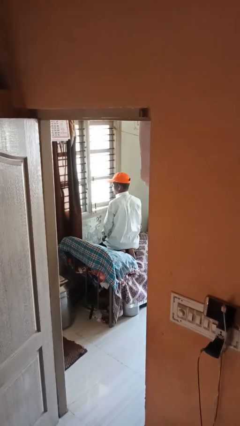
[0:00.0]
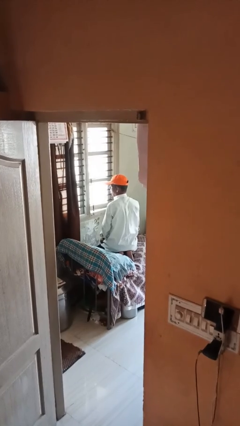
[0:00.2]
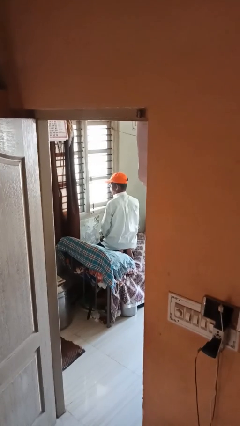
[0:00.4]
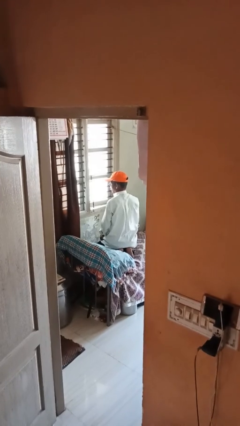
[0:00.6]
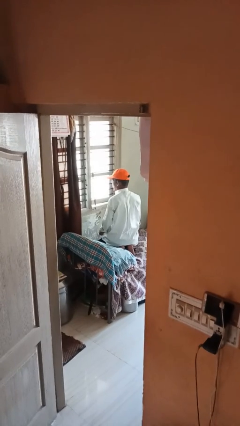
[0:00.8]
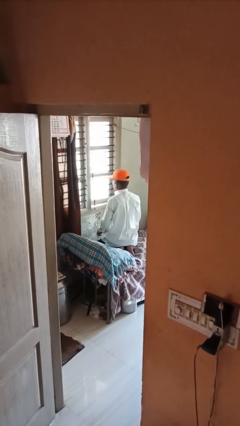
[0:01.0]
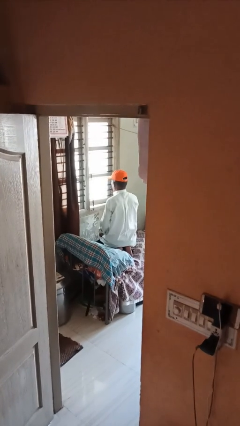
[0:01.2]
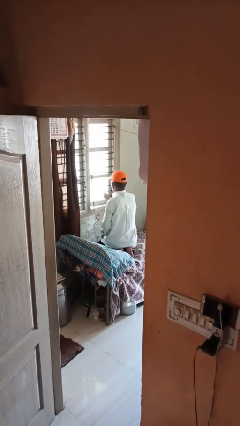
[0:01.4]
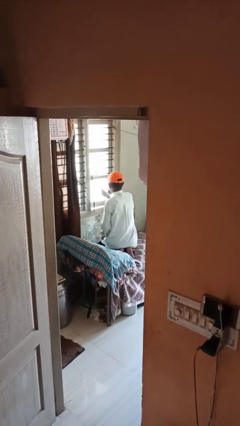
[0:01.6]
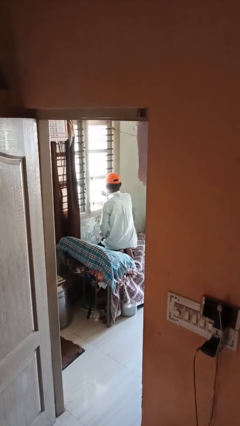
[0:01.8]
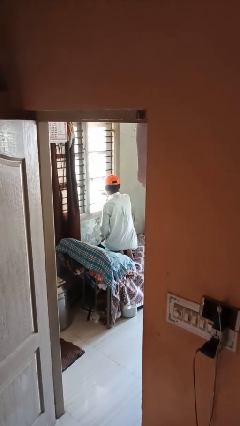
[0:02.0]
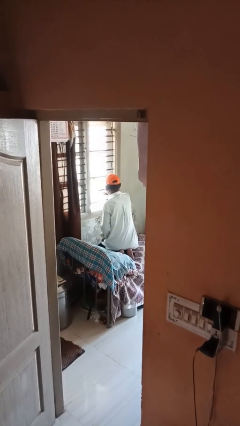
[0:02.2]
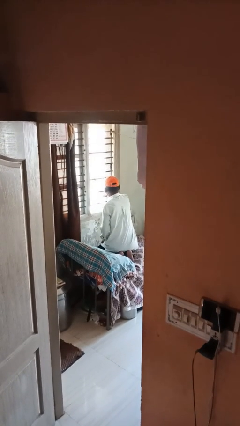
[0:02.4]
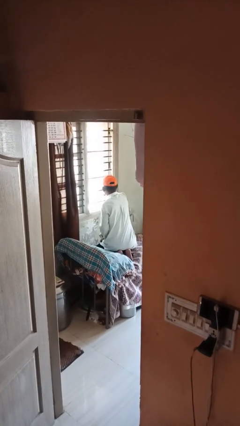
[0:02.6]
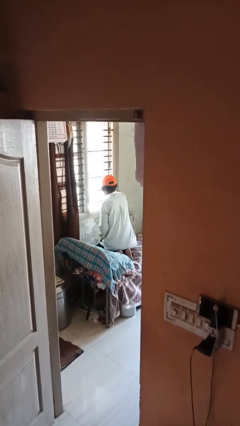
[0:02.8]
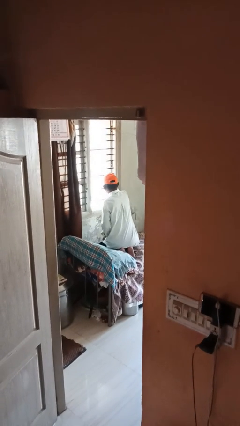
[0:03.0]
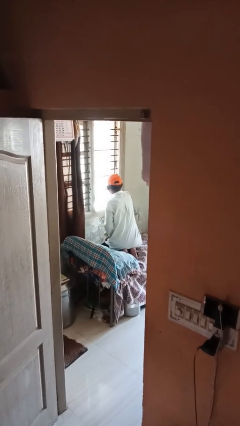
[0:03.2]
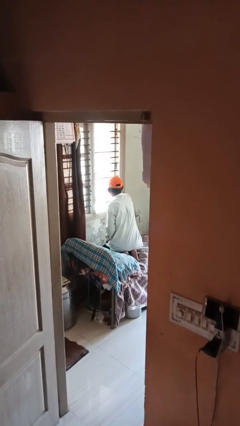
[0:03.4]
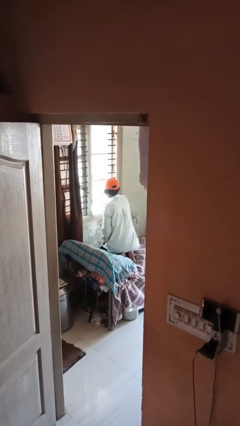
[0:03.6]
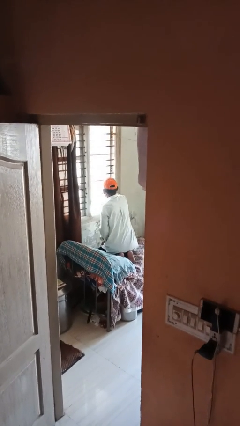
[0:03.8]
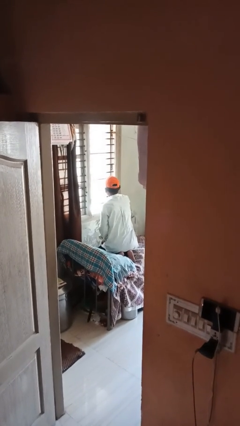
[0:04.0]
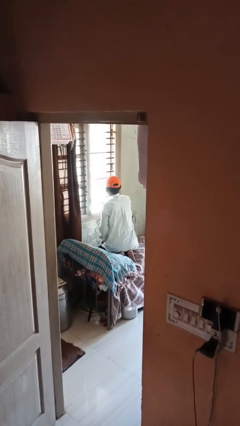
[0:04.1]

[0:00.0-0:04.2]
person opens home window

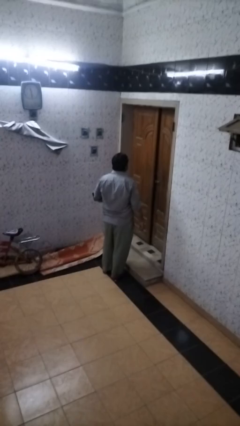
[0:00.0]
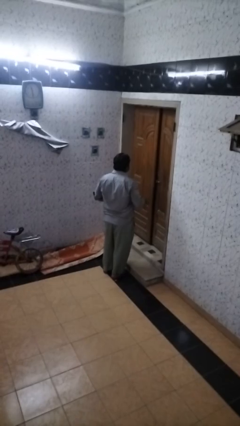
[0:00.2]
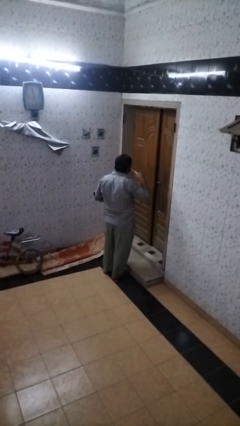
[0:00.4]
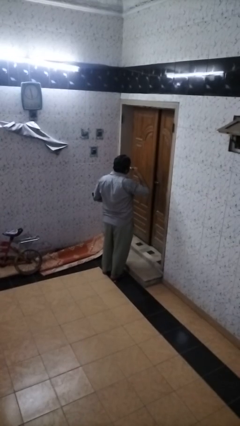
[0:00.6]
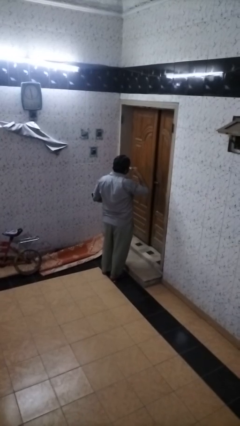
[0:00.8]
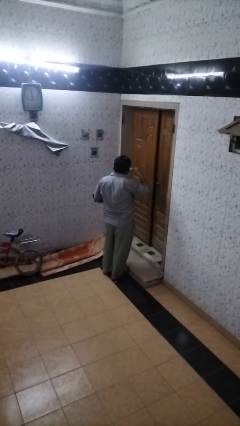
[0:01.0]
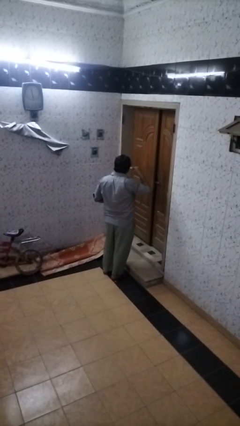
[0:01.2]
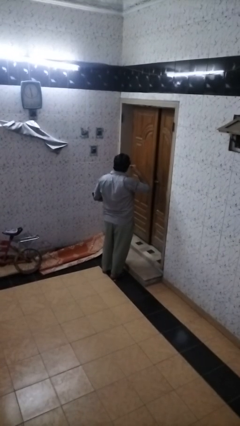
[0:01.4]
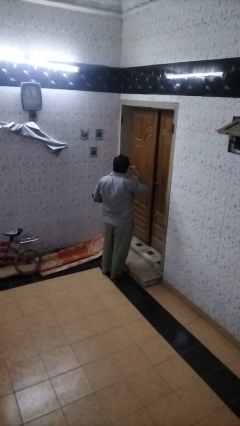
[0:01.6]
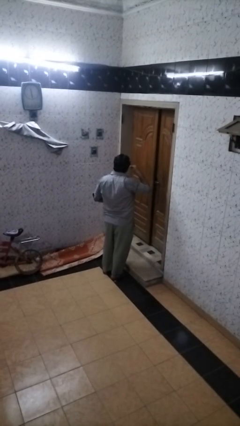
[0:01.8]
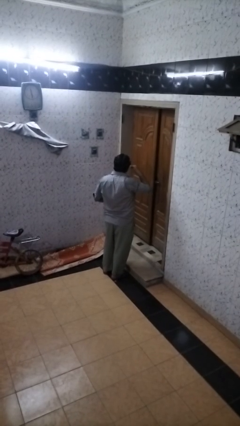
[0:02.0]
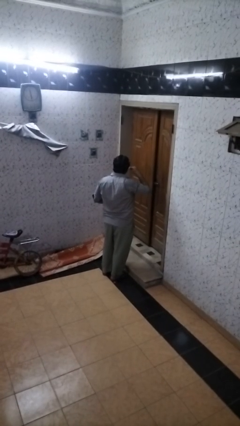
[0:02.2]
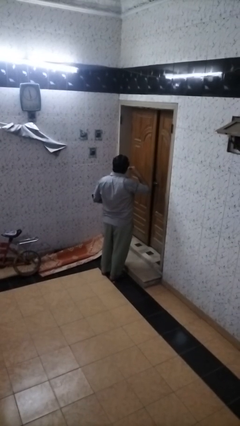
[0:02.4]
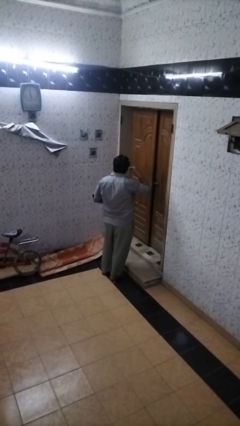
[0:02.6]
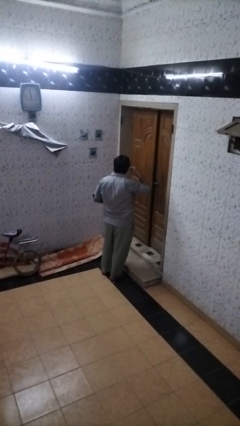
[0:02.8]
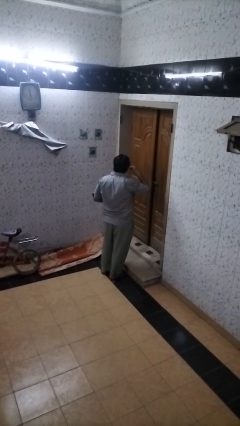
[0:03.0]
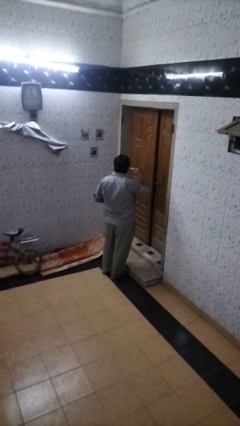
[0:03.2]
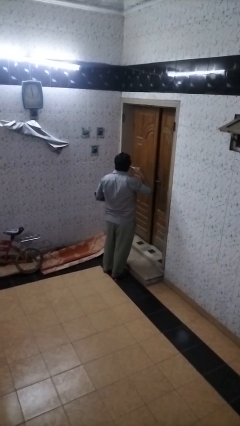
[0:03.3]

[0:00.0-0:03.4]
person brushes teeth

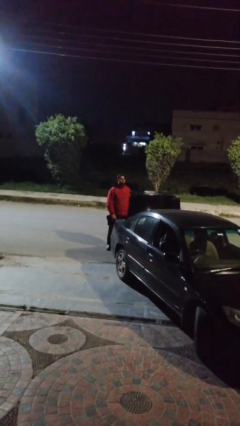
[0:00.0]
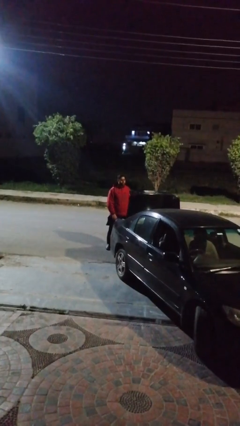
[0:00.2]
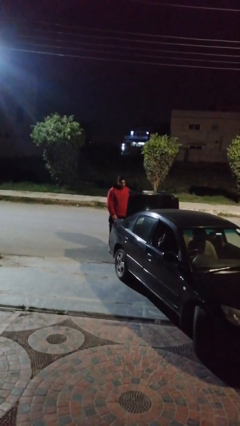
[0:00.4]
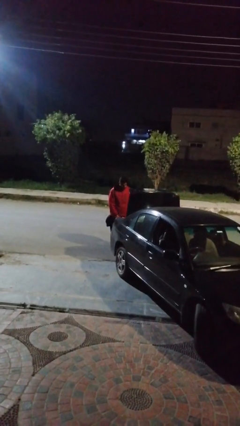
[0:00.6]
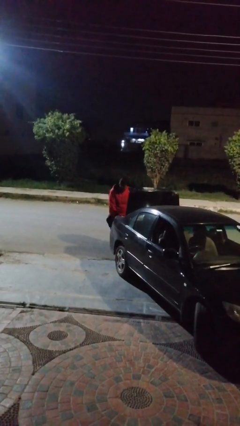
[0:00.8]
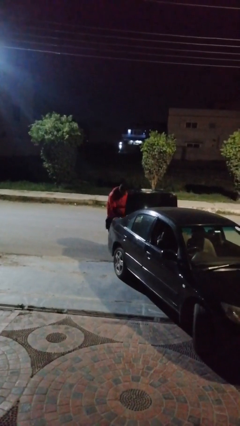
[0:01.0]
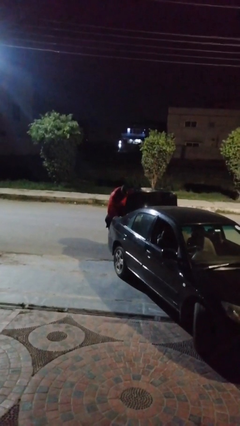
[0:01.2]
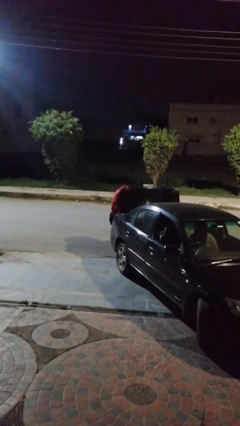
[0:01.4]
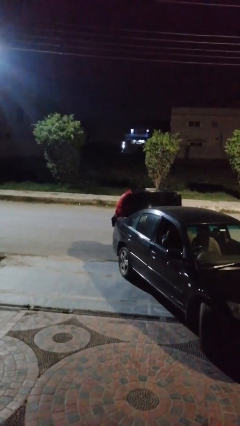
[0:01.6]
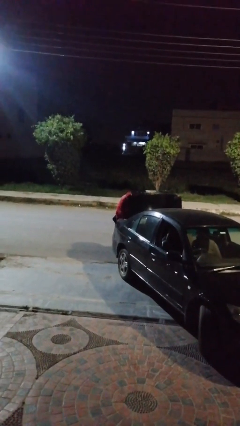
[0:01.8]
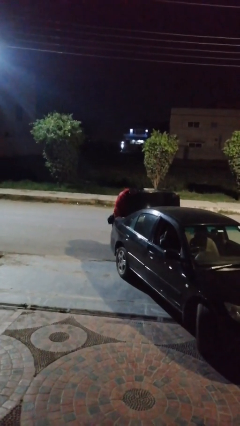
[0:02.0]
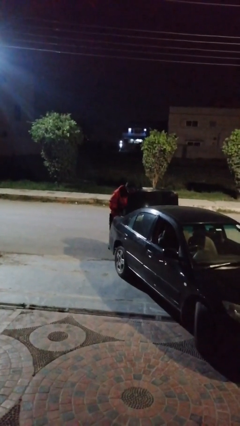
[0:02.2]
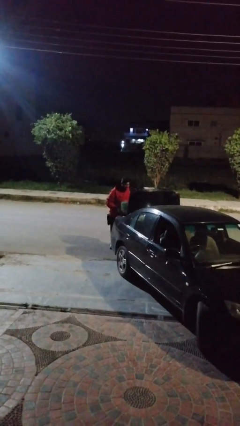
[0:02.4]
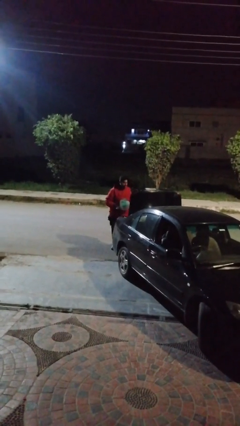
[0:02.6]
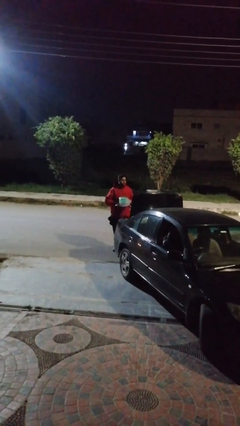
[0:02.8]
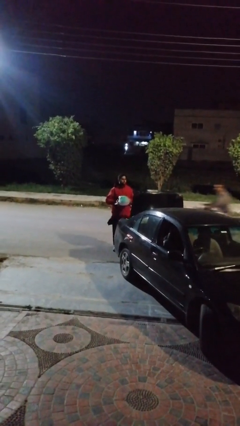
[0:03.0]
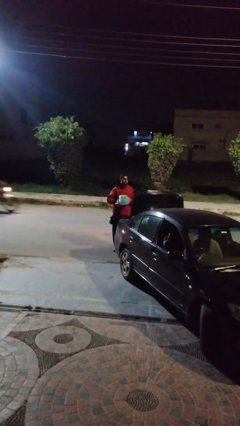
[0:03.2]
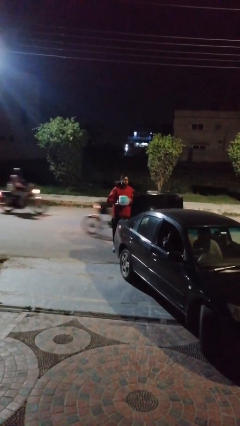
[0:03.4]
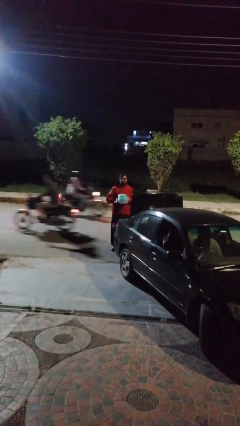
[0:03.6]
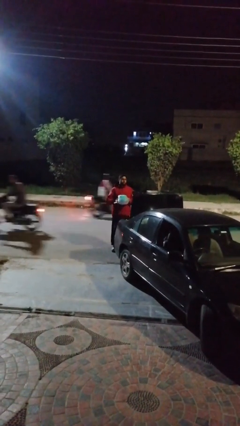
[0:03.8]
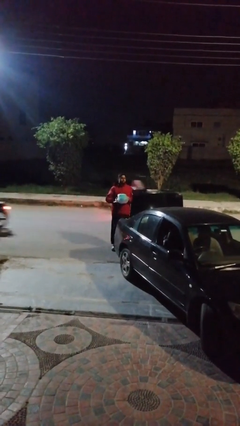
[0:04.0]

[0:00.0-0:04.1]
person unloads car

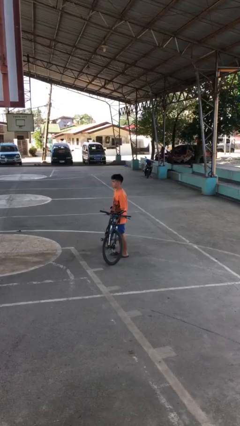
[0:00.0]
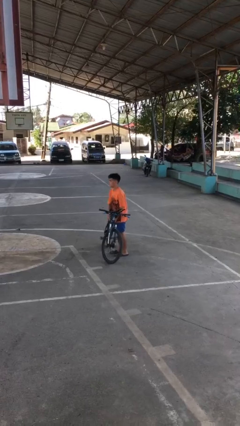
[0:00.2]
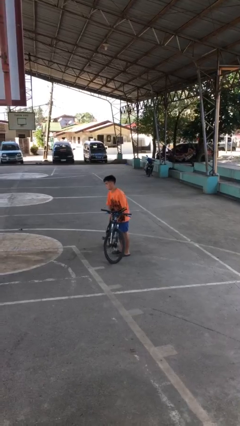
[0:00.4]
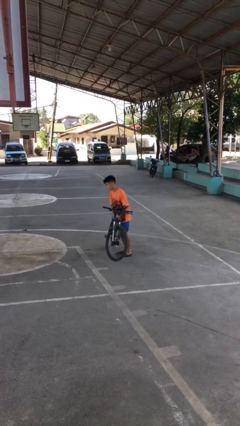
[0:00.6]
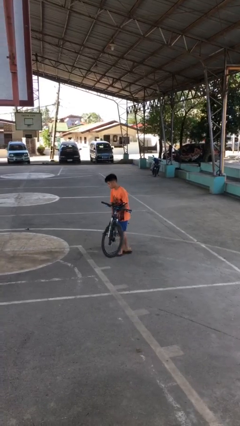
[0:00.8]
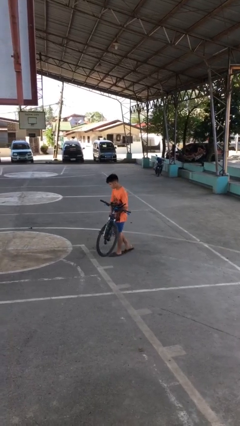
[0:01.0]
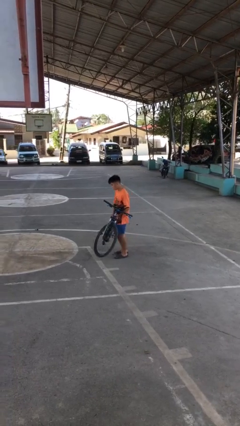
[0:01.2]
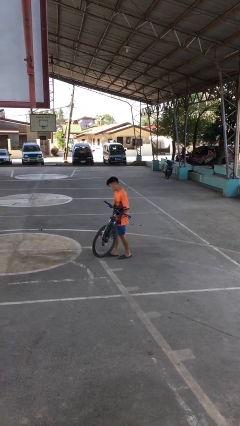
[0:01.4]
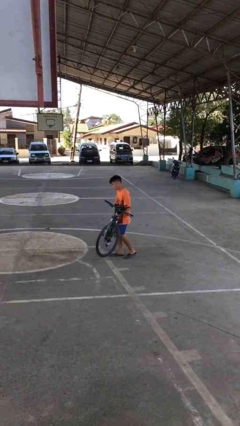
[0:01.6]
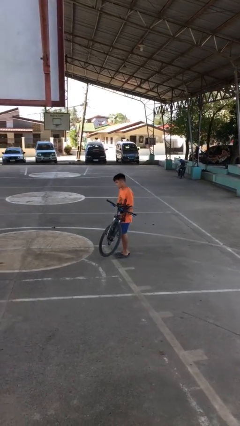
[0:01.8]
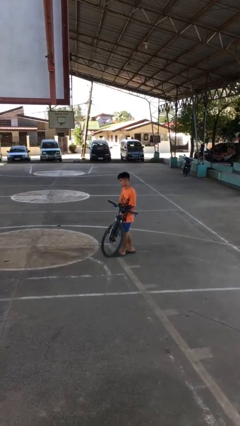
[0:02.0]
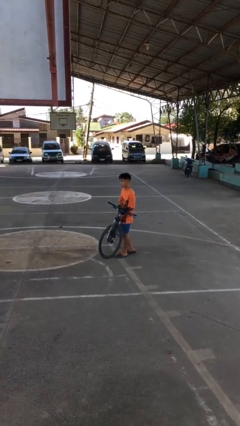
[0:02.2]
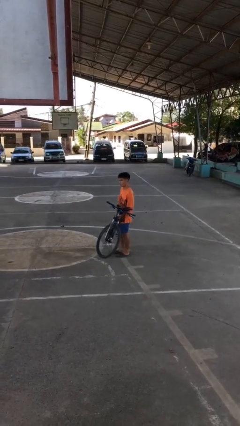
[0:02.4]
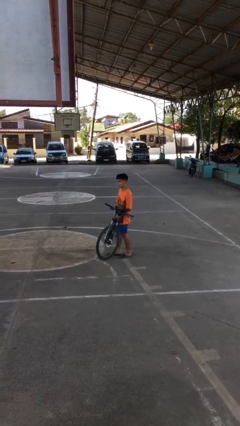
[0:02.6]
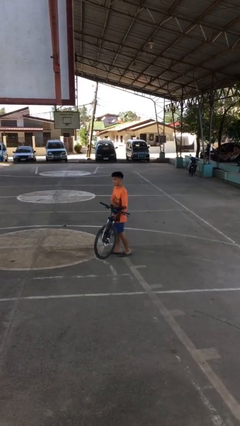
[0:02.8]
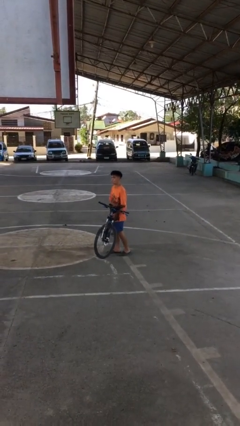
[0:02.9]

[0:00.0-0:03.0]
person carries bicycle

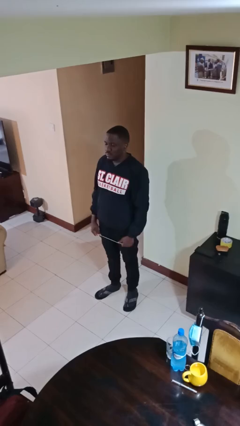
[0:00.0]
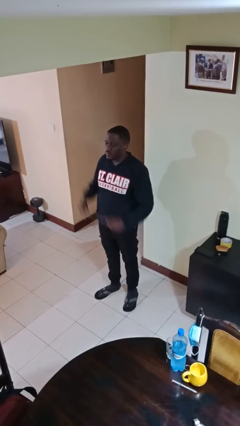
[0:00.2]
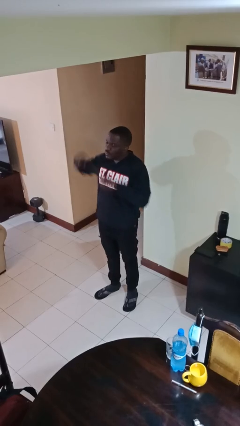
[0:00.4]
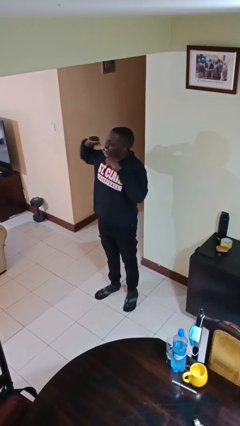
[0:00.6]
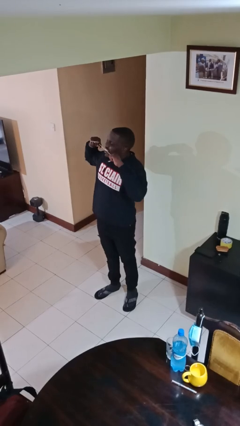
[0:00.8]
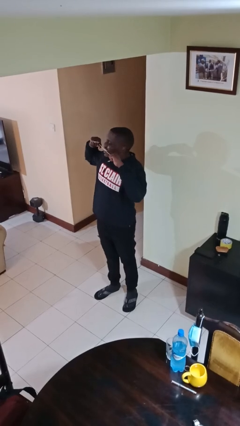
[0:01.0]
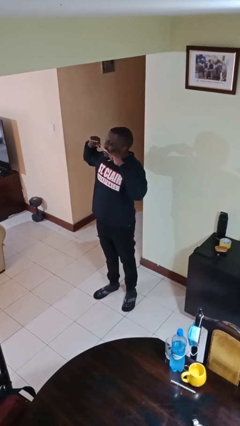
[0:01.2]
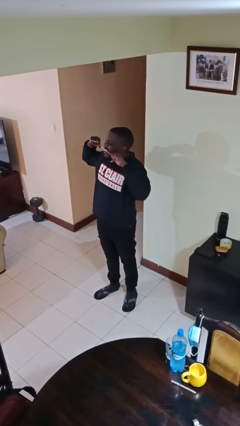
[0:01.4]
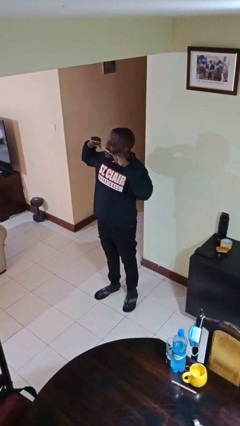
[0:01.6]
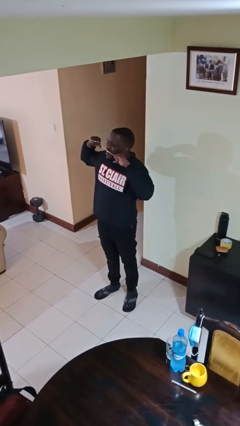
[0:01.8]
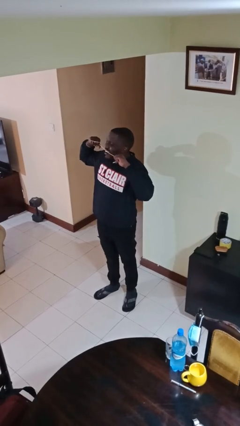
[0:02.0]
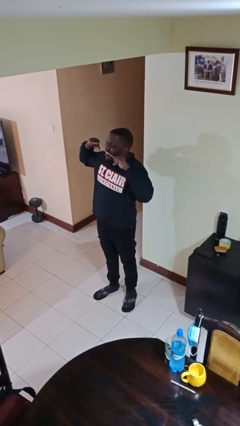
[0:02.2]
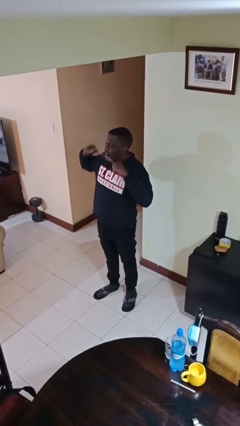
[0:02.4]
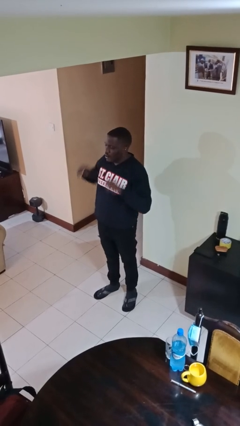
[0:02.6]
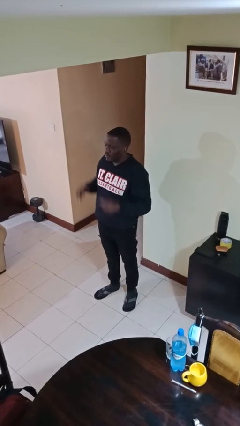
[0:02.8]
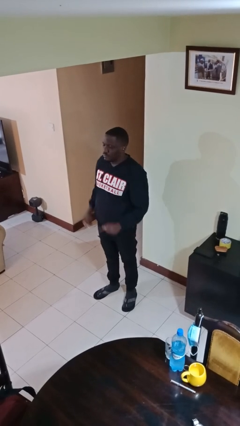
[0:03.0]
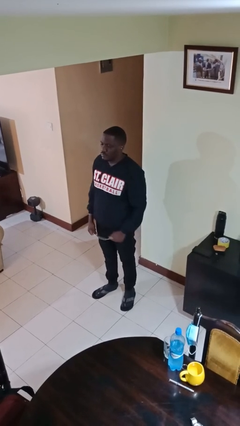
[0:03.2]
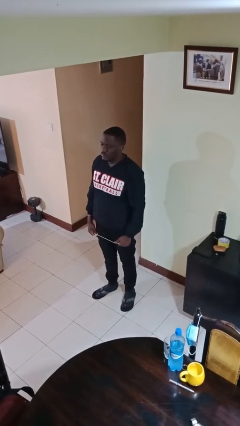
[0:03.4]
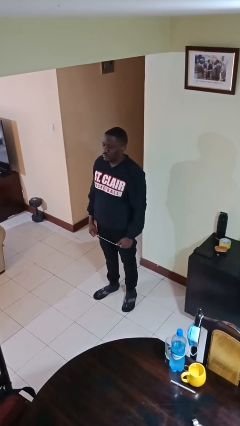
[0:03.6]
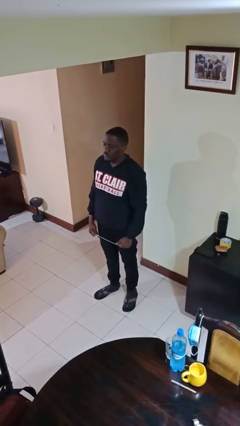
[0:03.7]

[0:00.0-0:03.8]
person flosses
